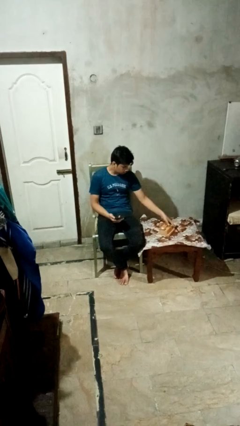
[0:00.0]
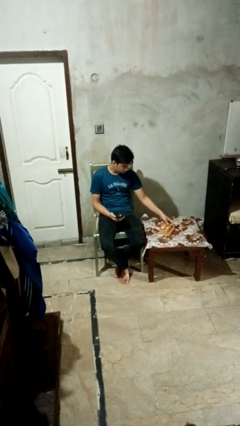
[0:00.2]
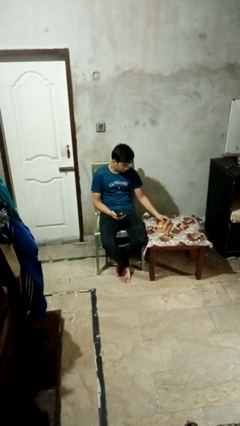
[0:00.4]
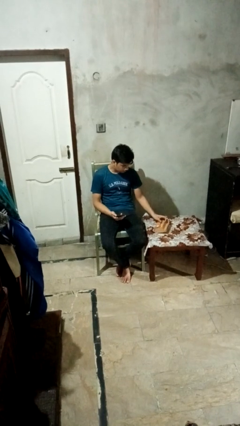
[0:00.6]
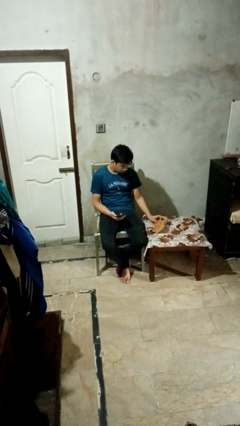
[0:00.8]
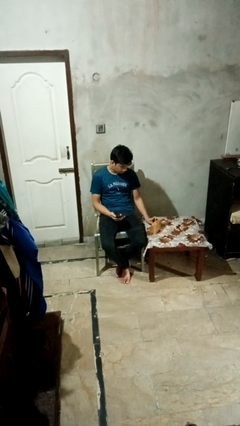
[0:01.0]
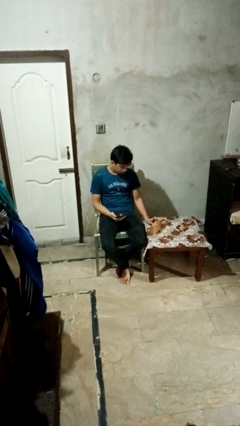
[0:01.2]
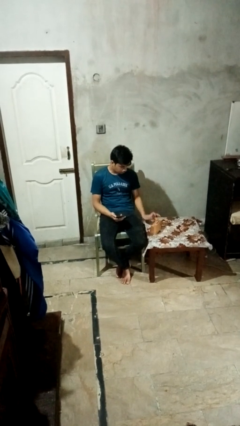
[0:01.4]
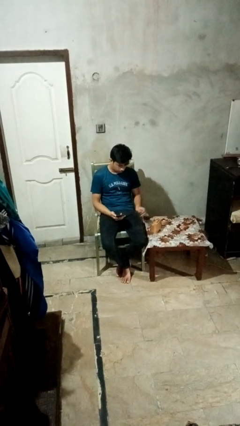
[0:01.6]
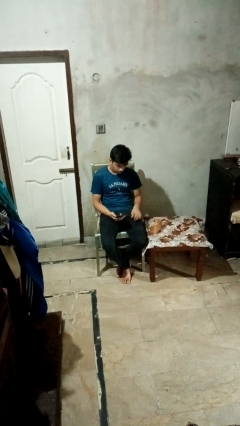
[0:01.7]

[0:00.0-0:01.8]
person sets upright furniture

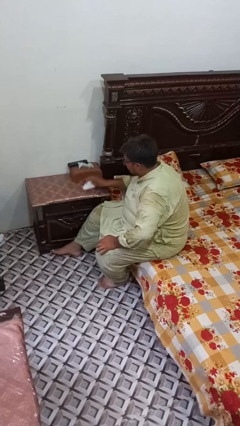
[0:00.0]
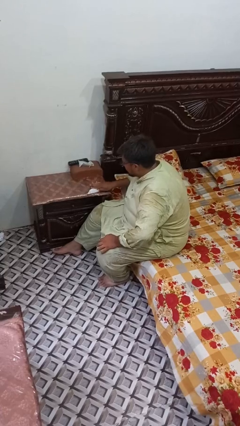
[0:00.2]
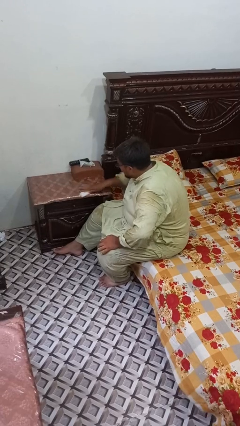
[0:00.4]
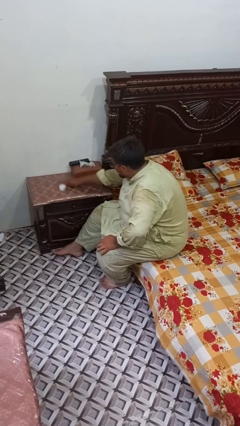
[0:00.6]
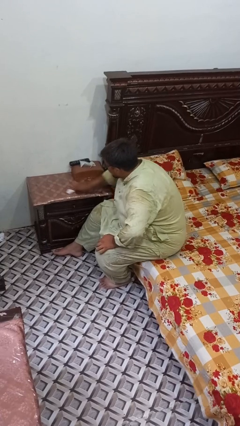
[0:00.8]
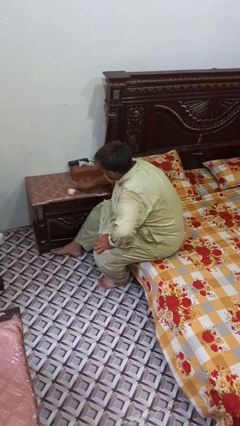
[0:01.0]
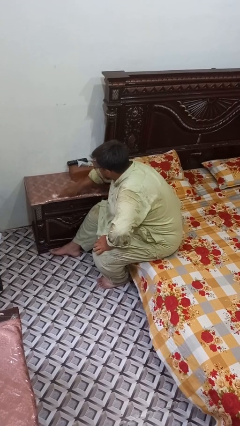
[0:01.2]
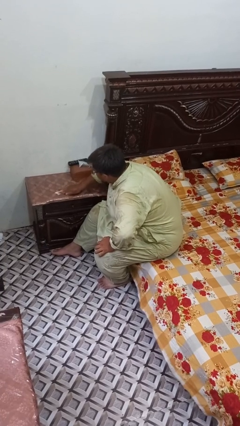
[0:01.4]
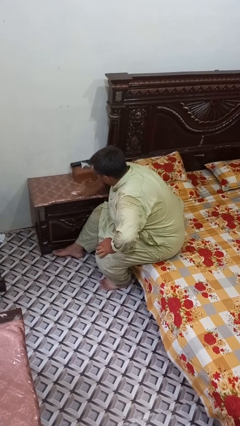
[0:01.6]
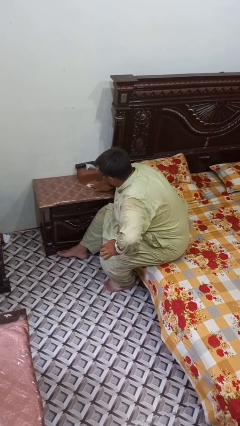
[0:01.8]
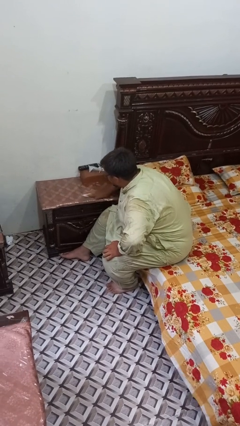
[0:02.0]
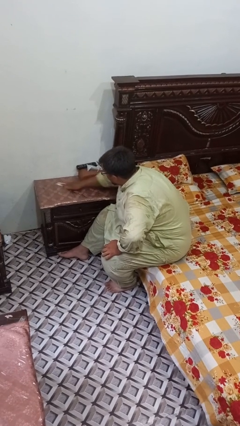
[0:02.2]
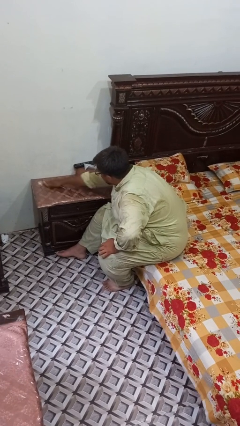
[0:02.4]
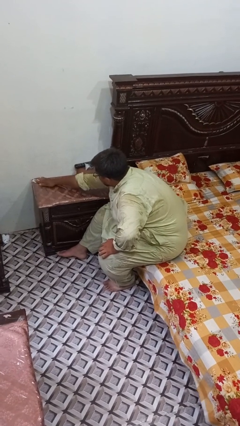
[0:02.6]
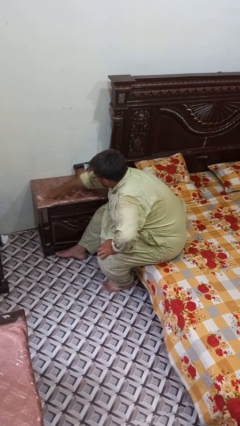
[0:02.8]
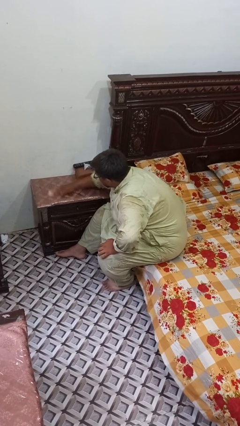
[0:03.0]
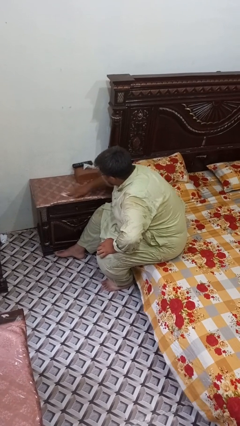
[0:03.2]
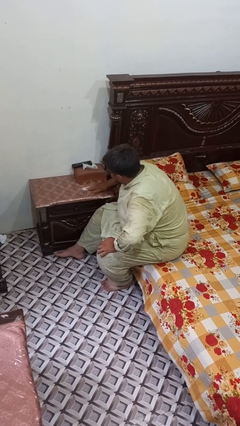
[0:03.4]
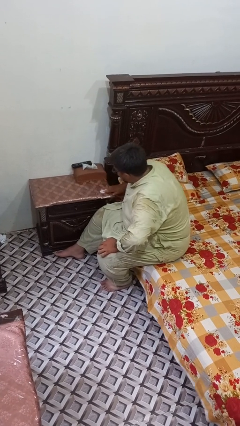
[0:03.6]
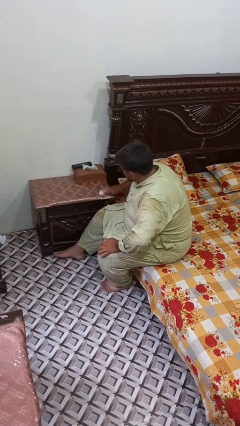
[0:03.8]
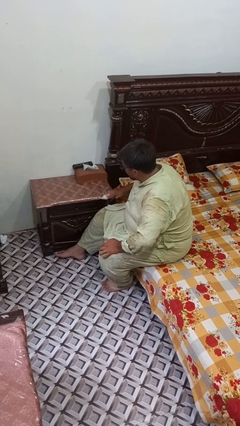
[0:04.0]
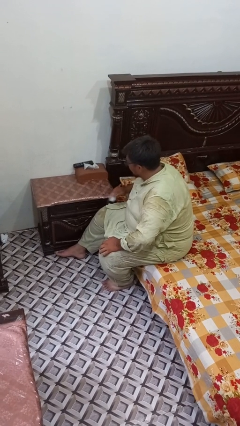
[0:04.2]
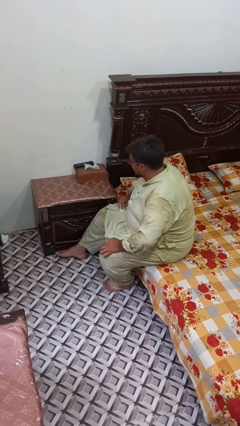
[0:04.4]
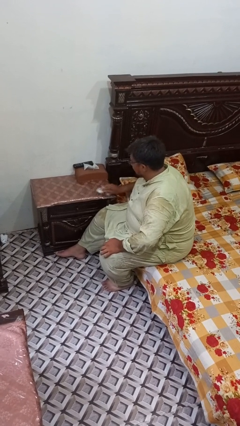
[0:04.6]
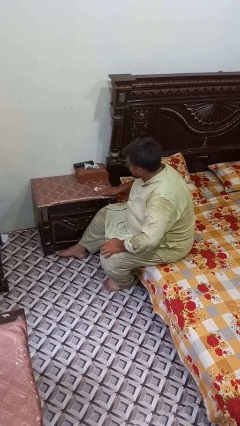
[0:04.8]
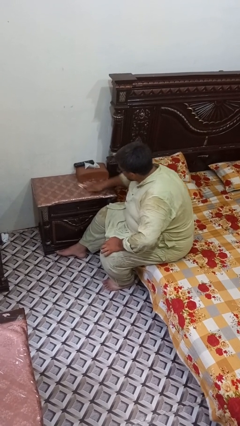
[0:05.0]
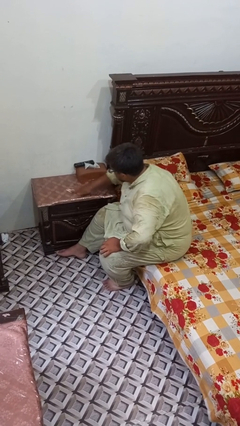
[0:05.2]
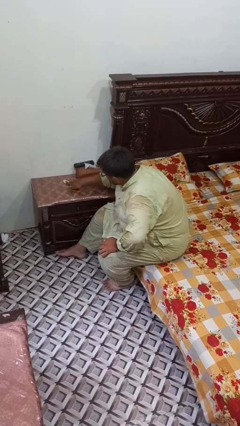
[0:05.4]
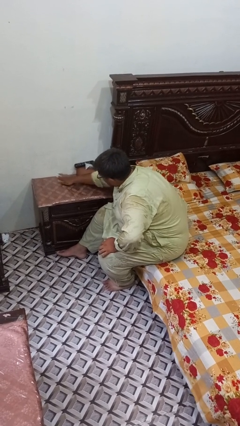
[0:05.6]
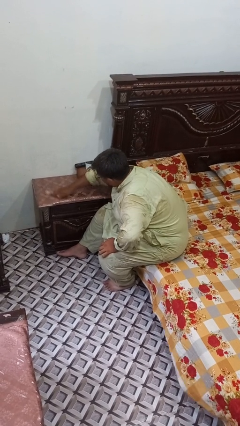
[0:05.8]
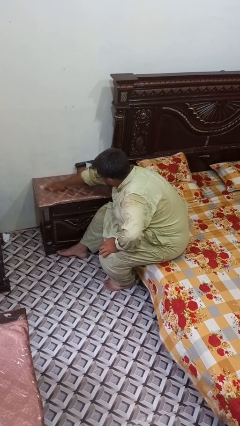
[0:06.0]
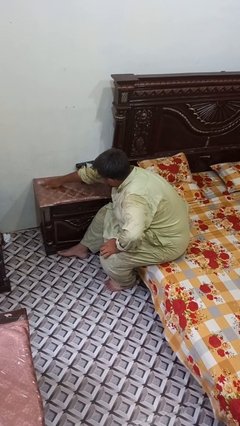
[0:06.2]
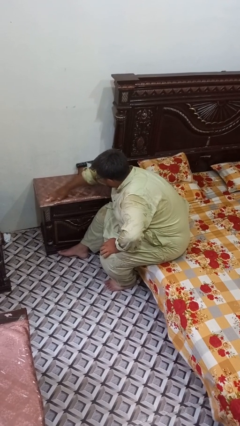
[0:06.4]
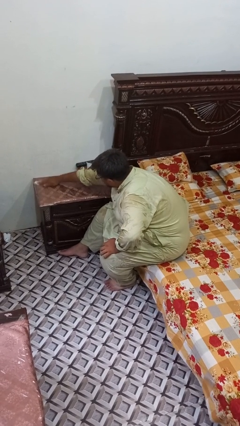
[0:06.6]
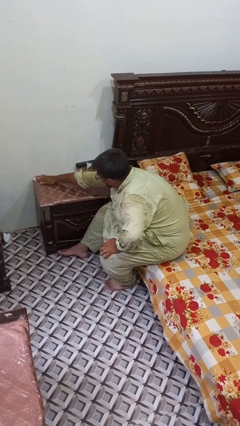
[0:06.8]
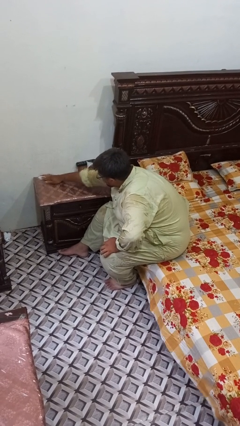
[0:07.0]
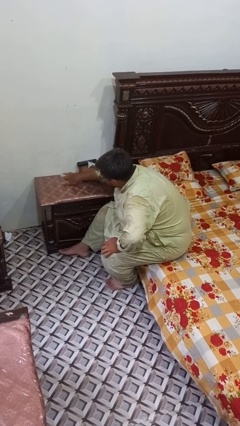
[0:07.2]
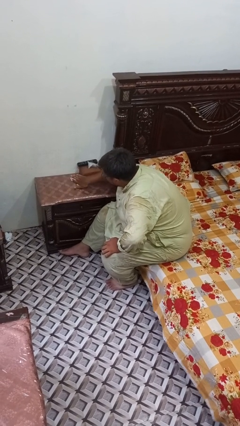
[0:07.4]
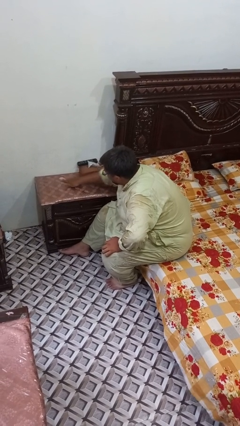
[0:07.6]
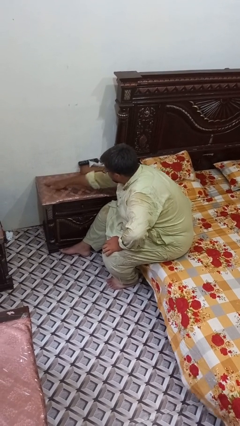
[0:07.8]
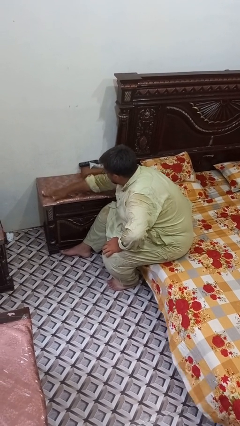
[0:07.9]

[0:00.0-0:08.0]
person cleans table with rag

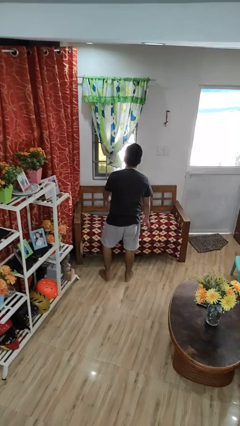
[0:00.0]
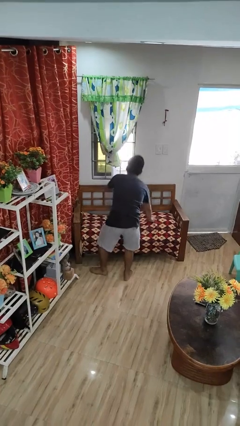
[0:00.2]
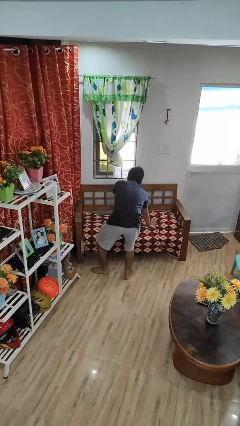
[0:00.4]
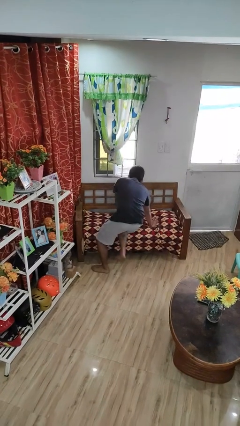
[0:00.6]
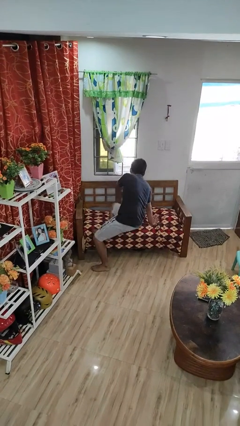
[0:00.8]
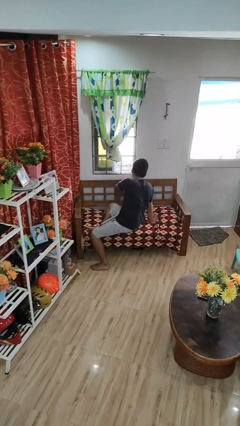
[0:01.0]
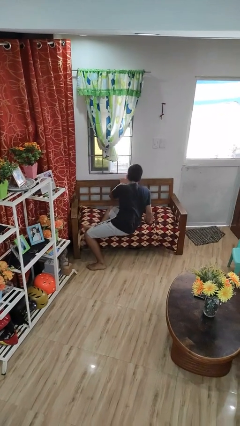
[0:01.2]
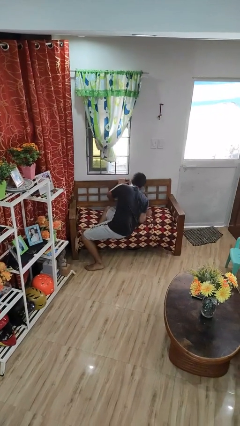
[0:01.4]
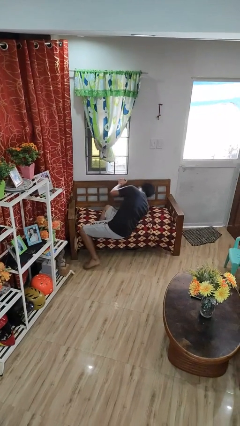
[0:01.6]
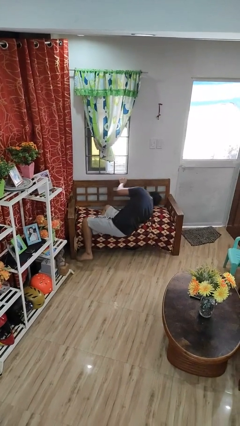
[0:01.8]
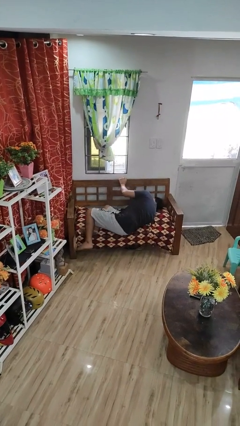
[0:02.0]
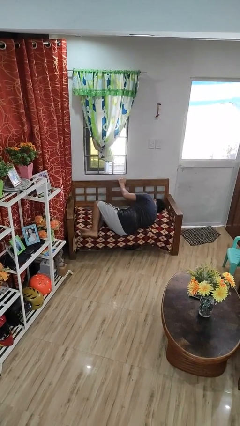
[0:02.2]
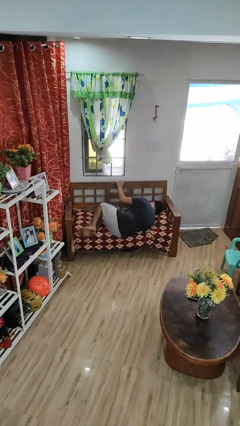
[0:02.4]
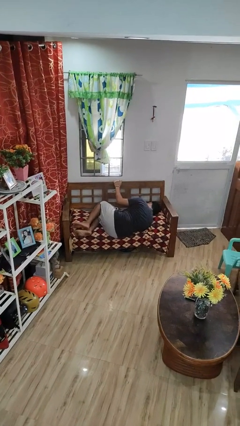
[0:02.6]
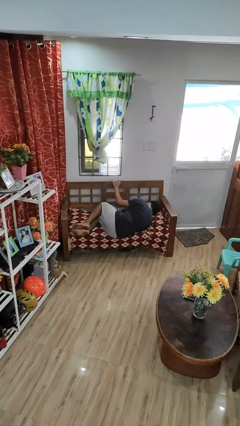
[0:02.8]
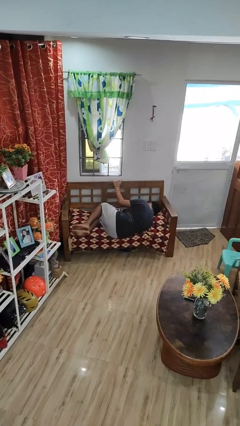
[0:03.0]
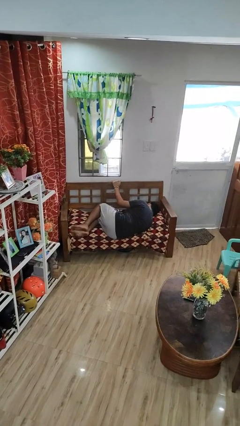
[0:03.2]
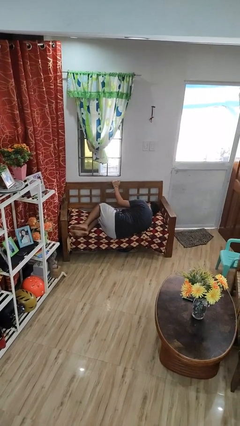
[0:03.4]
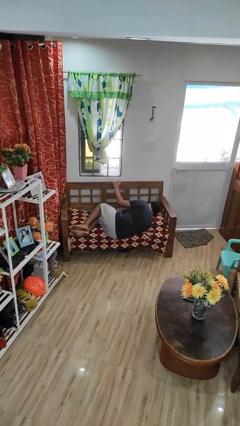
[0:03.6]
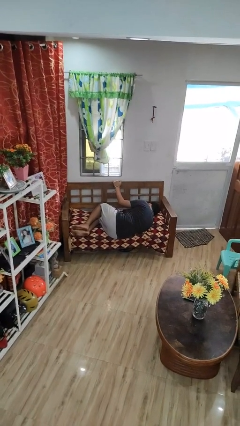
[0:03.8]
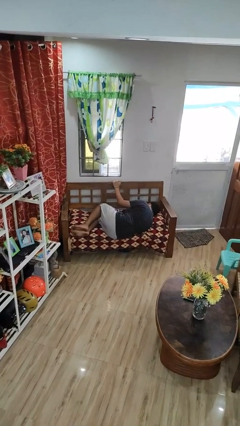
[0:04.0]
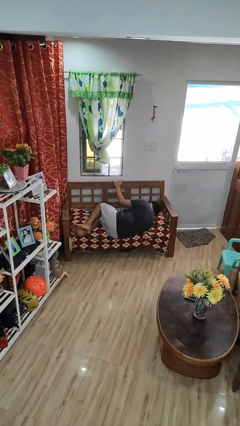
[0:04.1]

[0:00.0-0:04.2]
person lies down on couch

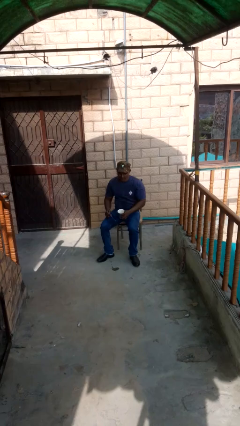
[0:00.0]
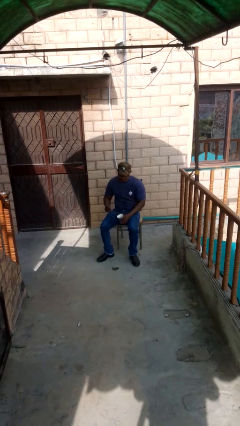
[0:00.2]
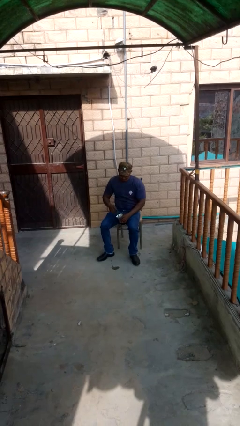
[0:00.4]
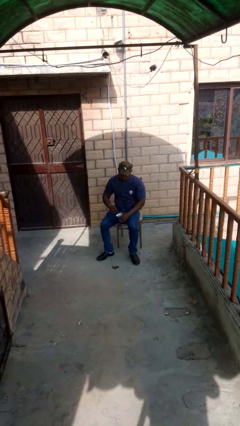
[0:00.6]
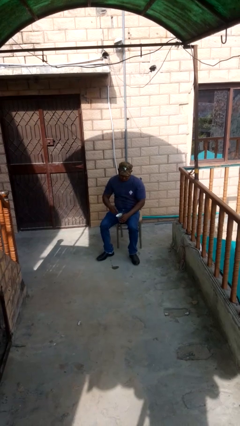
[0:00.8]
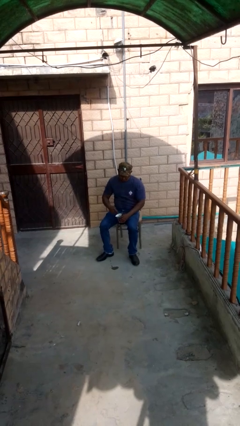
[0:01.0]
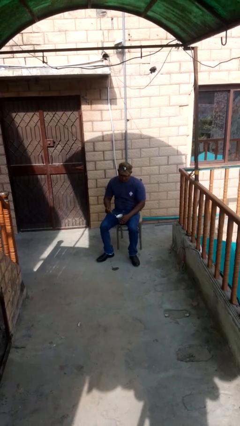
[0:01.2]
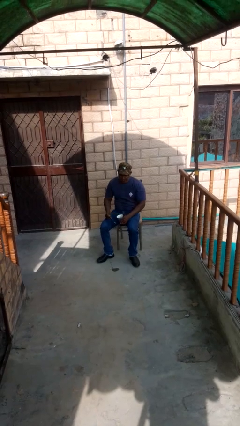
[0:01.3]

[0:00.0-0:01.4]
person stirs mug

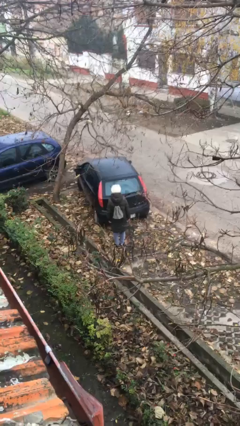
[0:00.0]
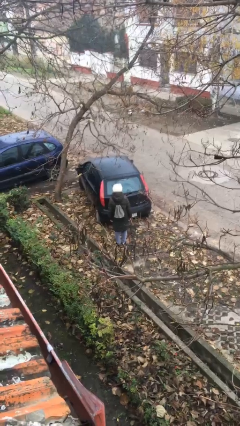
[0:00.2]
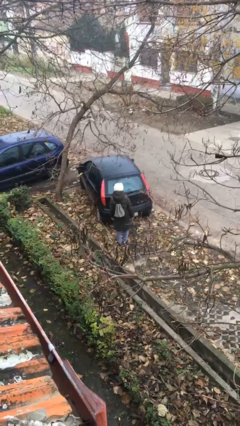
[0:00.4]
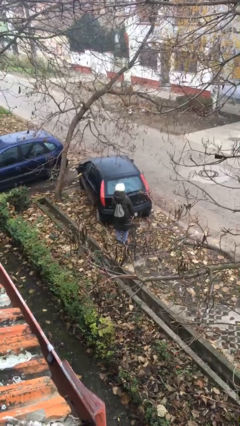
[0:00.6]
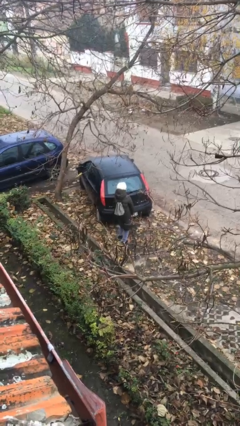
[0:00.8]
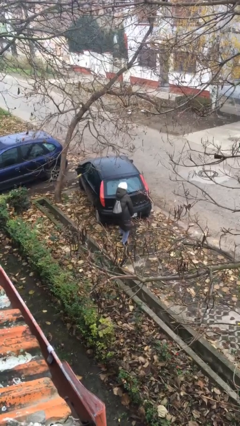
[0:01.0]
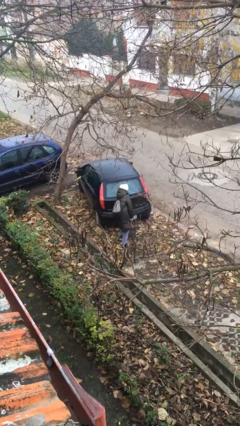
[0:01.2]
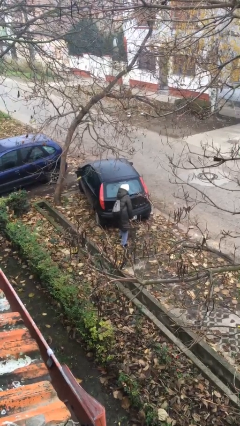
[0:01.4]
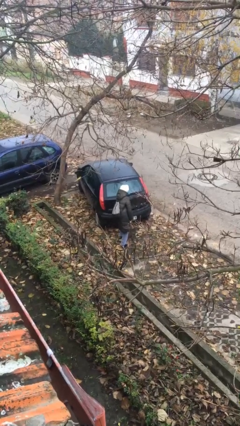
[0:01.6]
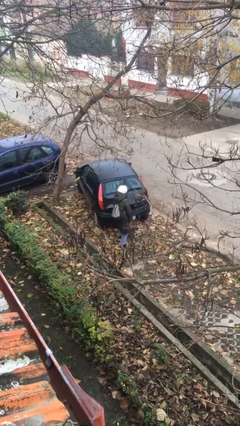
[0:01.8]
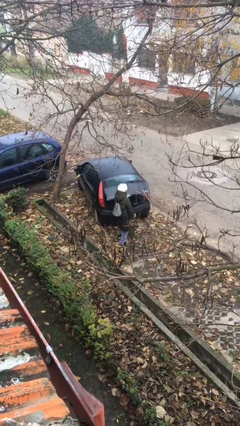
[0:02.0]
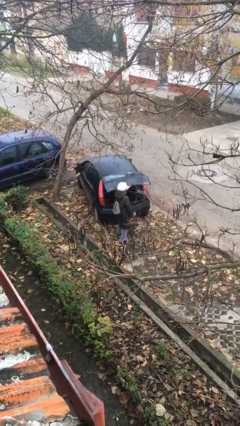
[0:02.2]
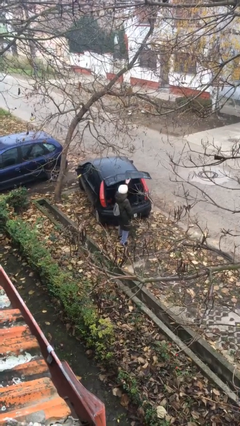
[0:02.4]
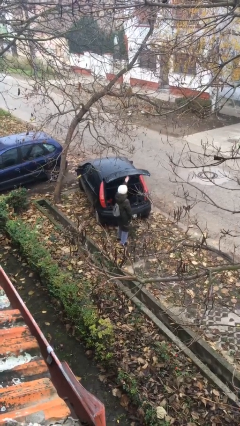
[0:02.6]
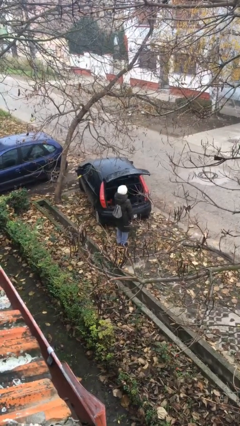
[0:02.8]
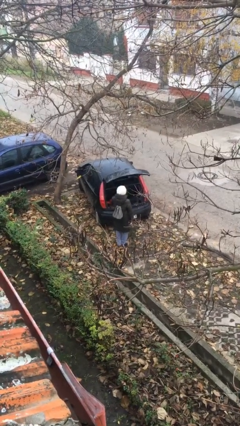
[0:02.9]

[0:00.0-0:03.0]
person opens car trunk
